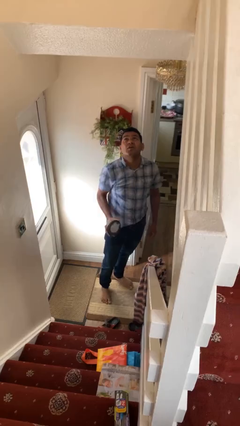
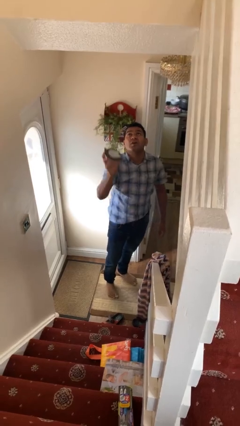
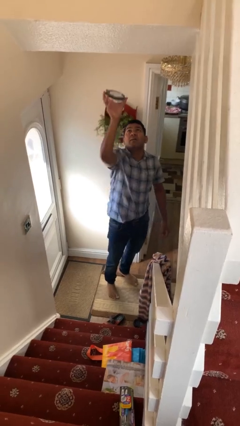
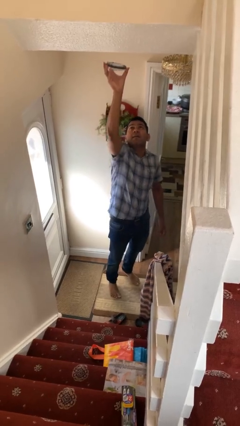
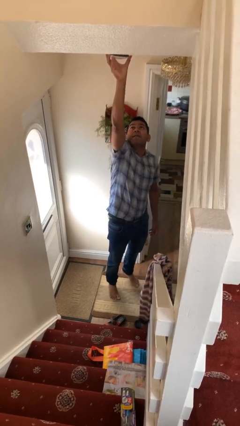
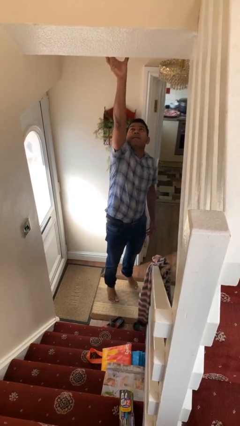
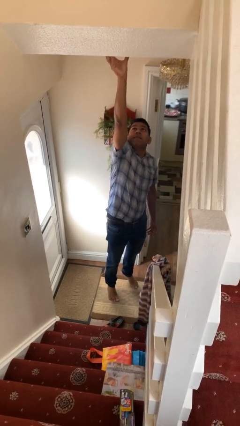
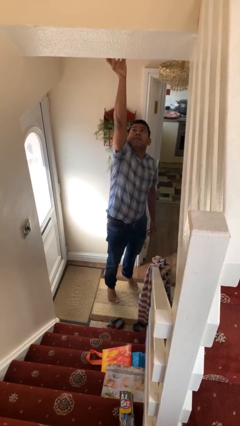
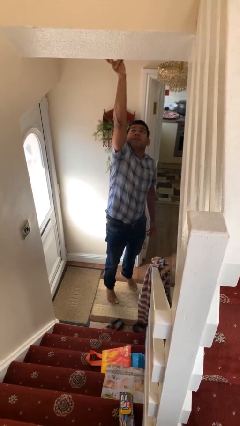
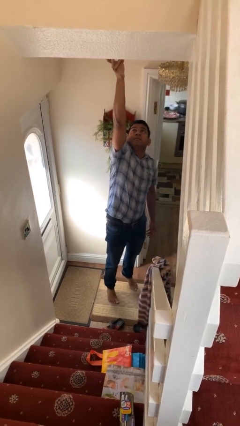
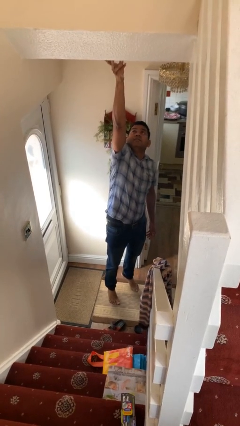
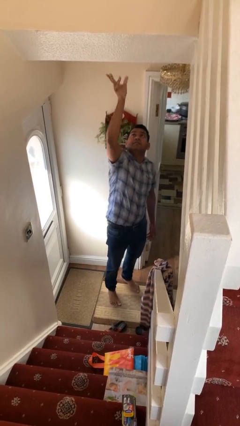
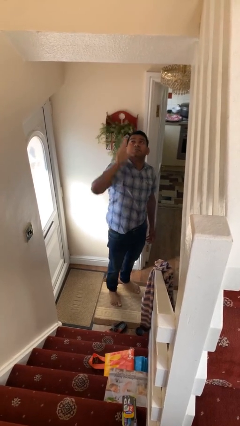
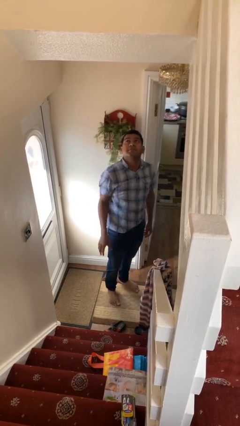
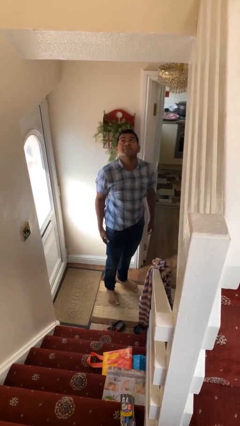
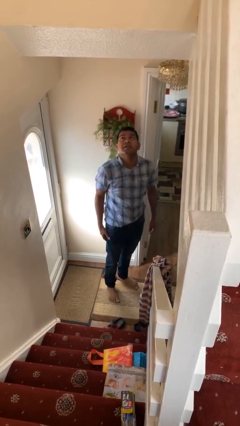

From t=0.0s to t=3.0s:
person puts up smoke detector

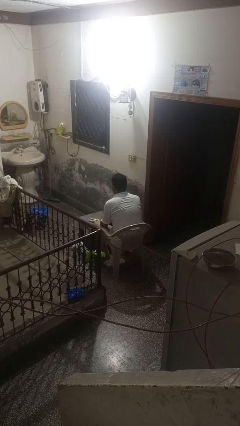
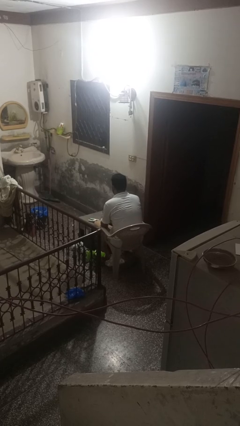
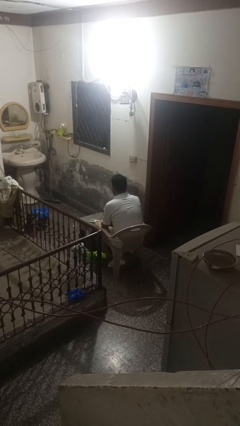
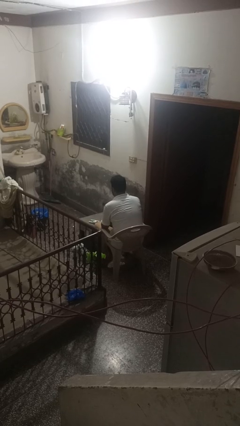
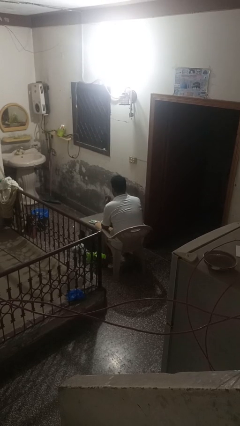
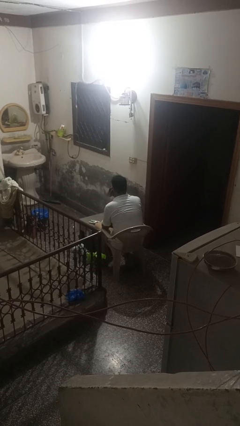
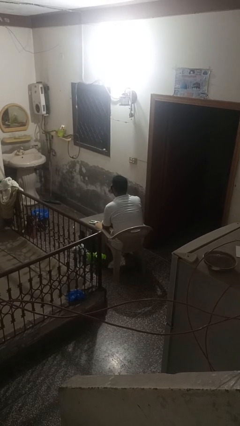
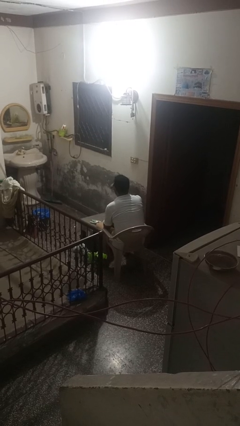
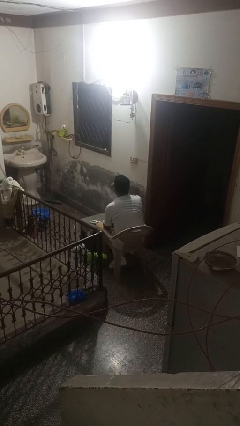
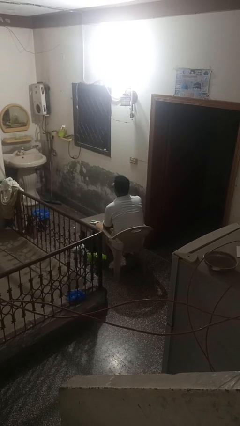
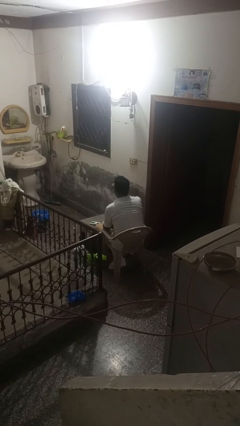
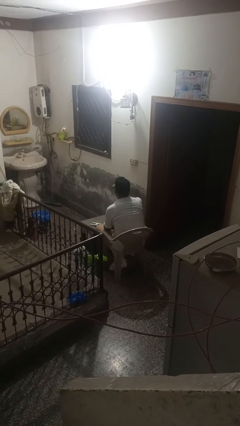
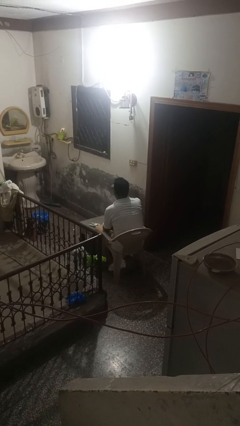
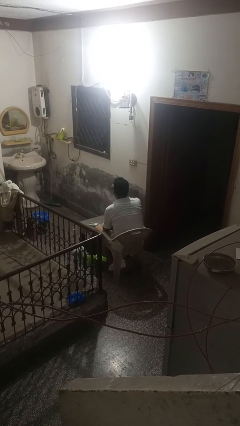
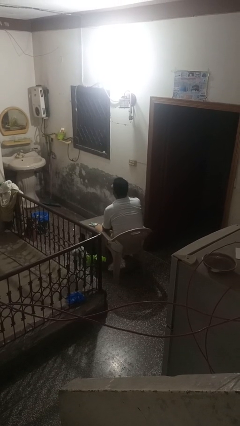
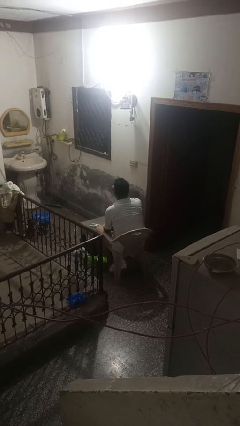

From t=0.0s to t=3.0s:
person drinks from cup

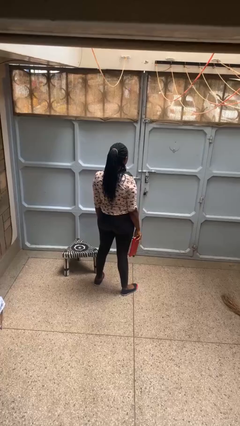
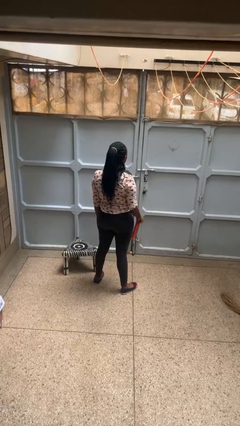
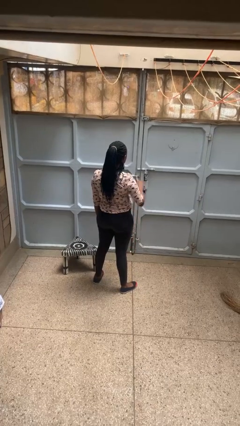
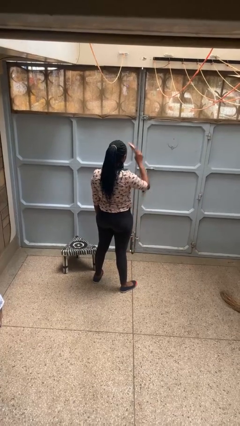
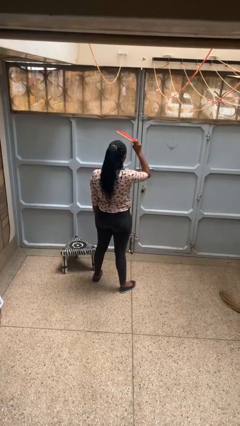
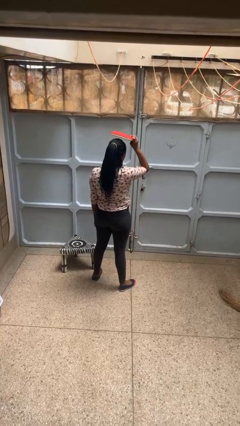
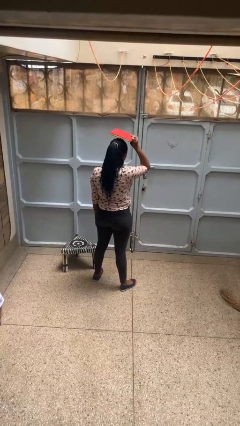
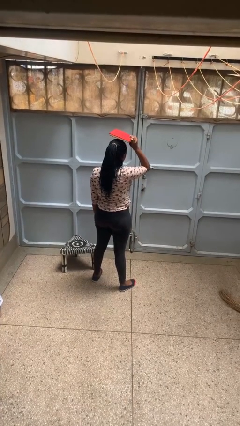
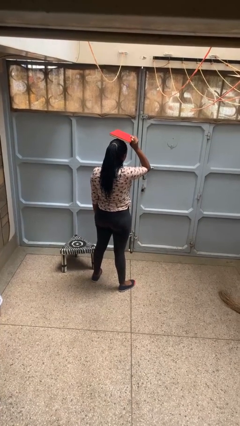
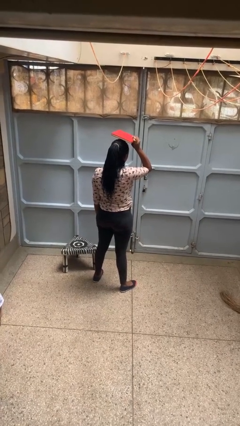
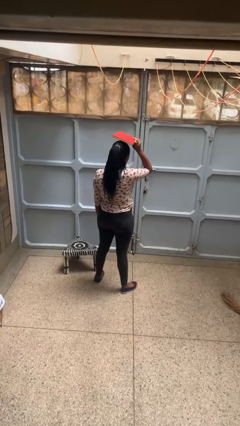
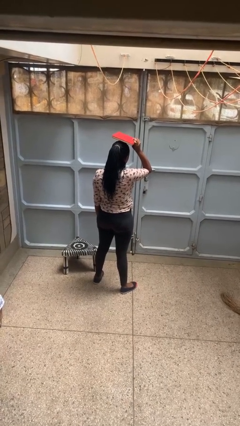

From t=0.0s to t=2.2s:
person holds object above head

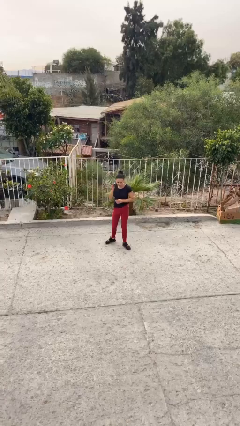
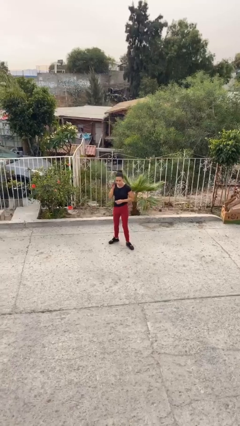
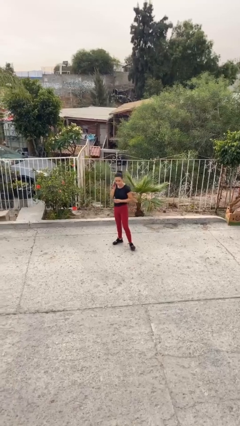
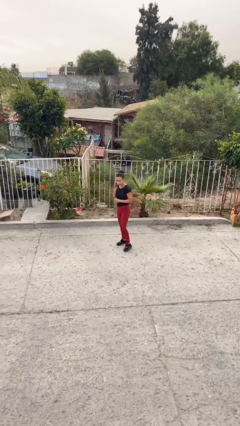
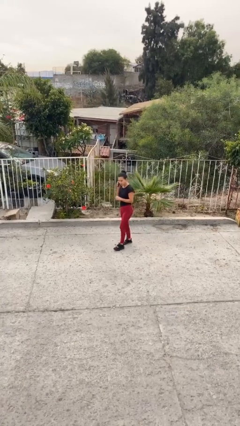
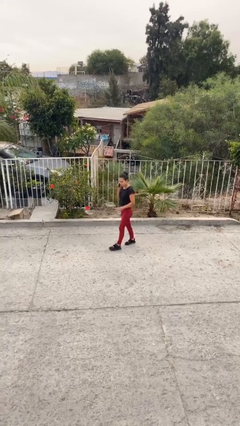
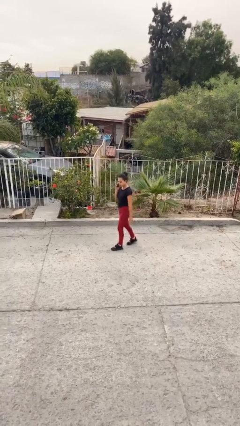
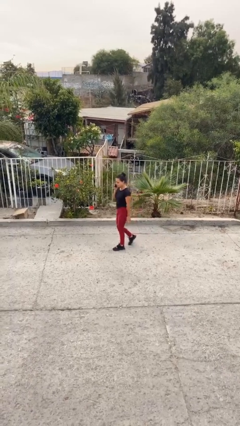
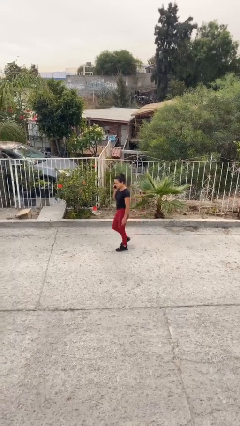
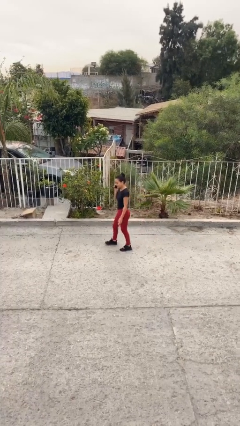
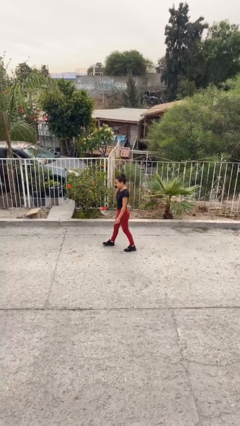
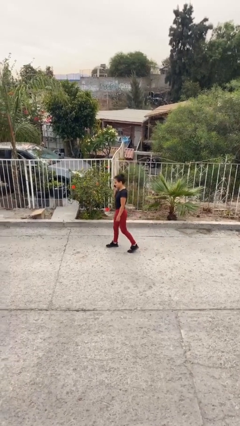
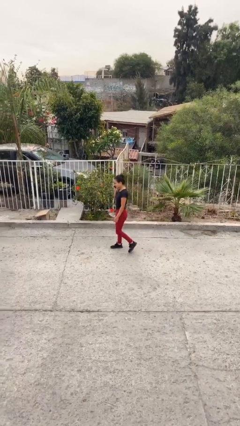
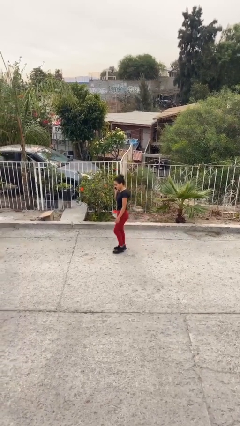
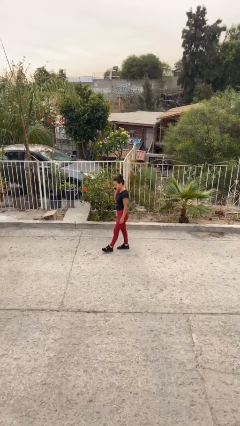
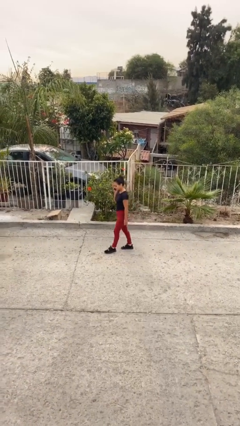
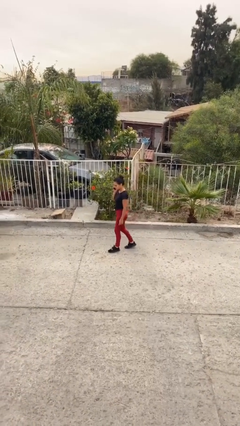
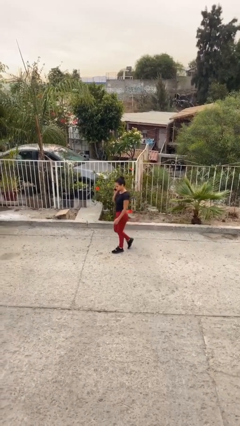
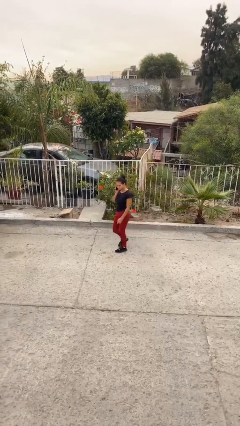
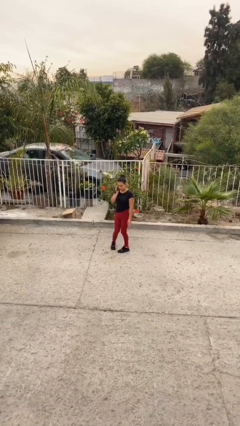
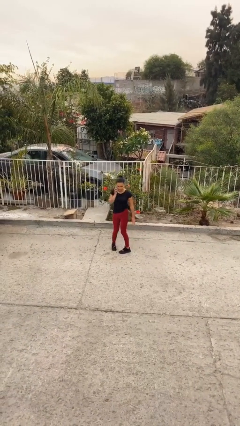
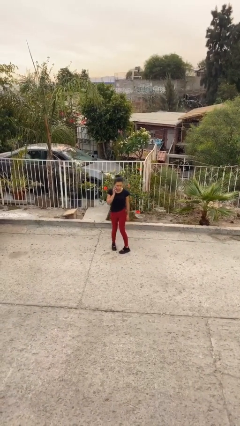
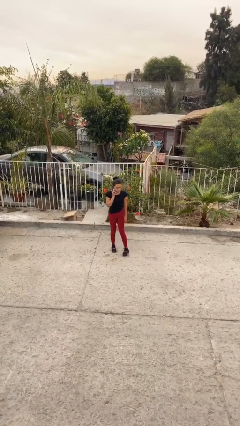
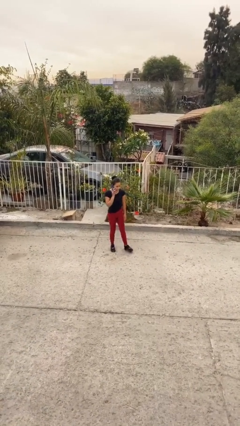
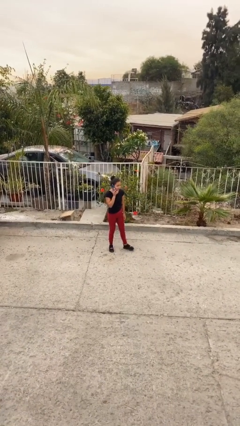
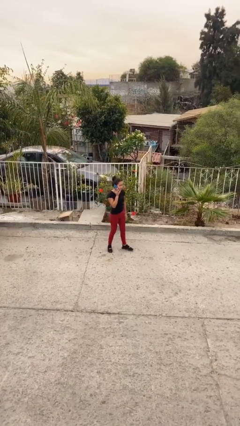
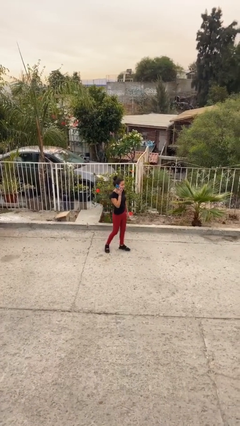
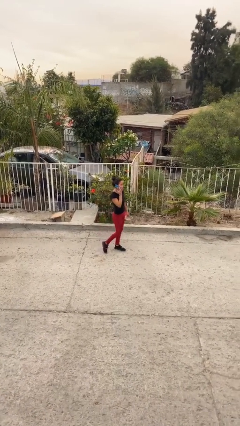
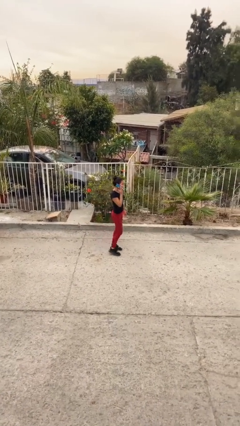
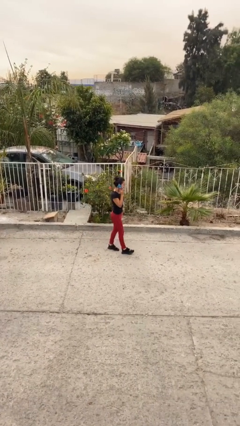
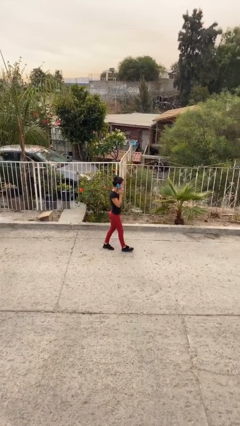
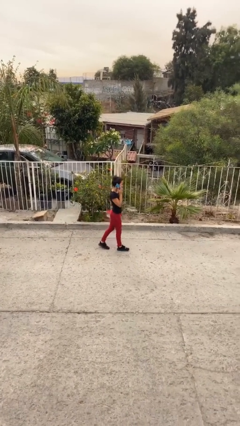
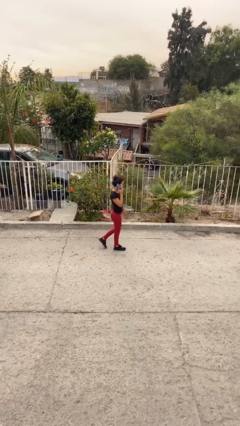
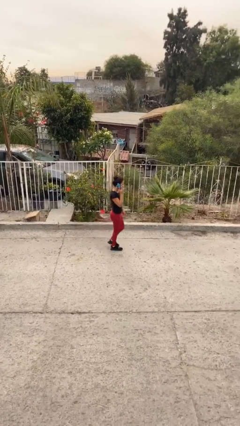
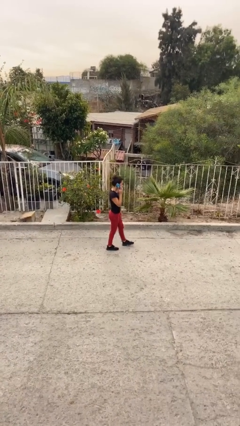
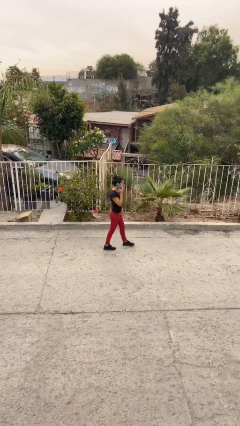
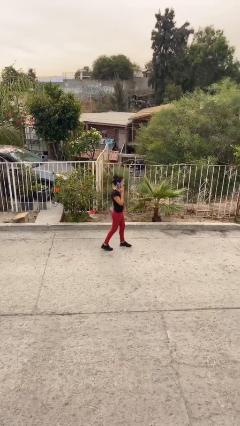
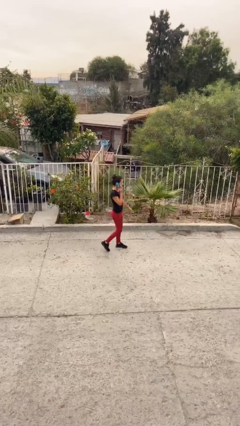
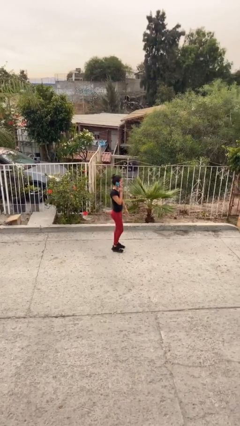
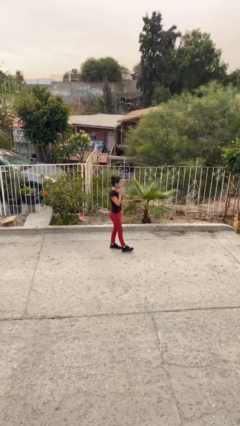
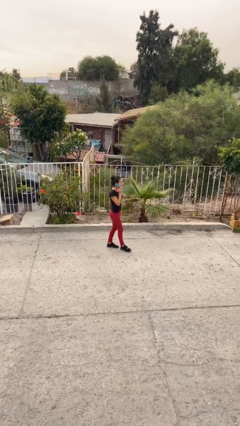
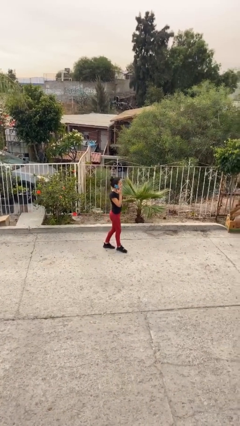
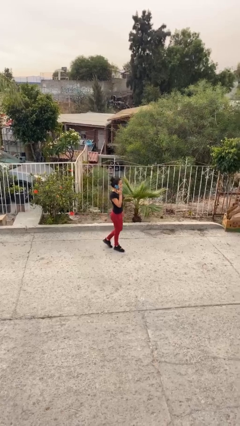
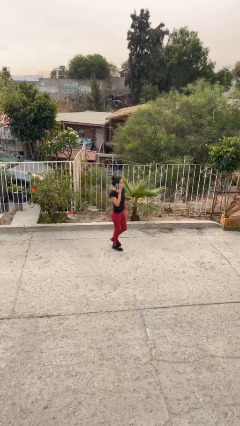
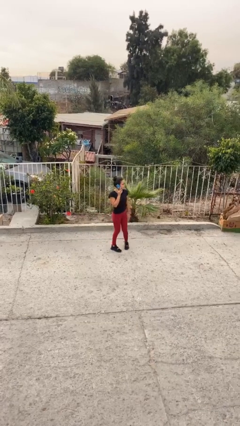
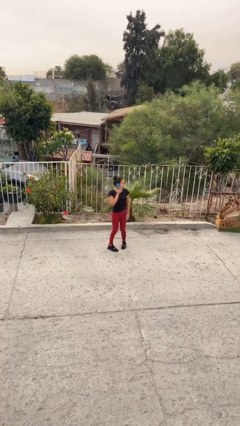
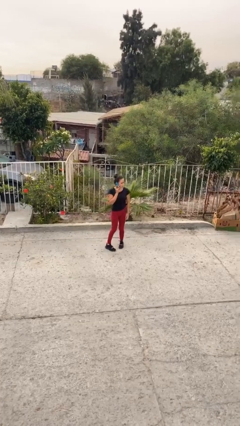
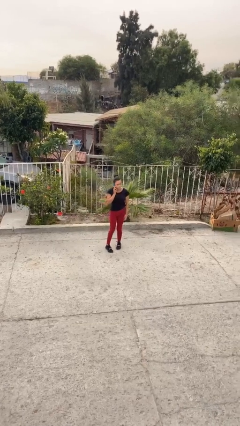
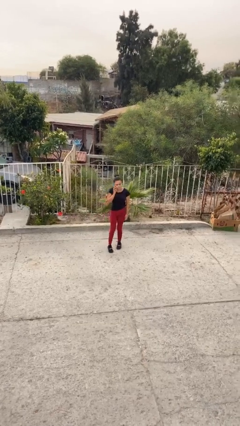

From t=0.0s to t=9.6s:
person talks on phone
